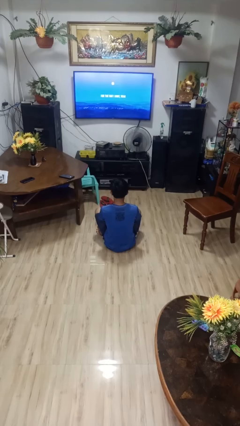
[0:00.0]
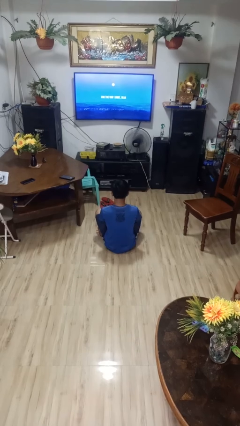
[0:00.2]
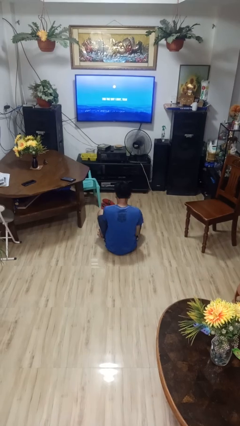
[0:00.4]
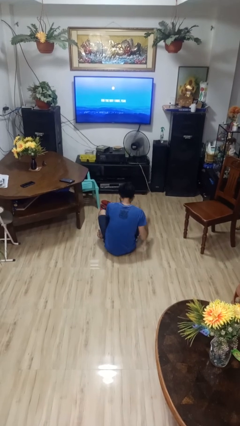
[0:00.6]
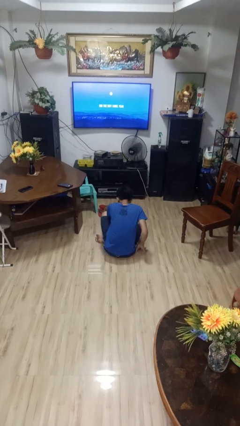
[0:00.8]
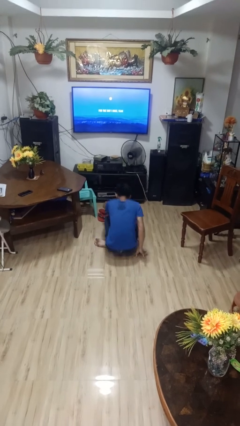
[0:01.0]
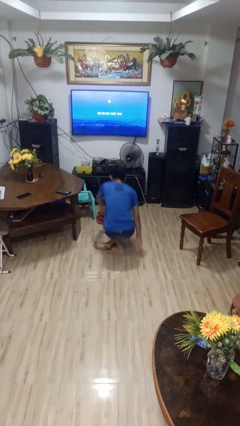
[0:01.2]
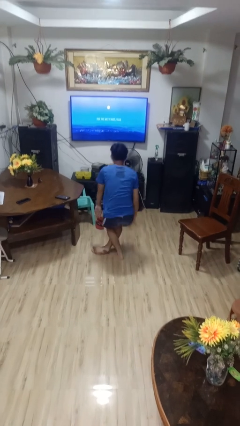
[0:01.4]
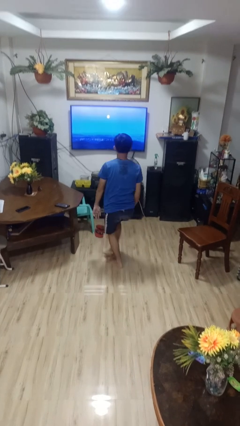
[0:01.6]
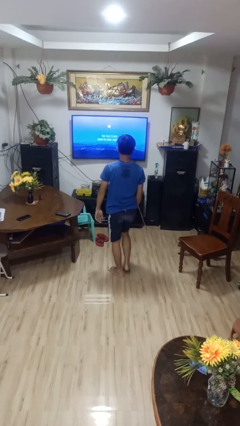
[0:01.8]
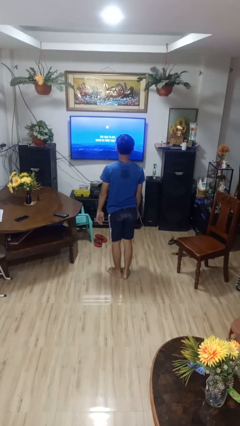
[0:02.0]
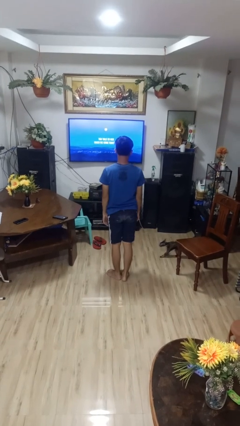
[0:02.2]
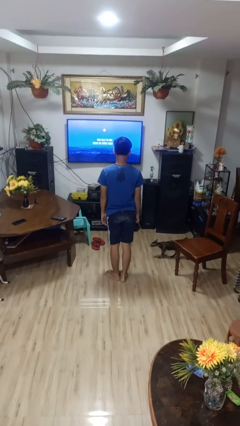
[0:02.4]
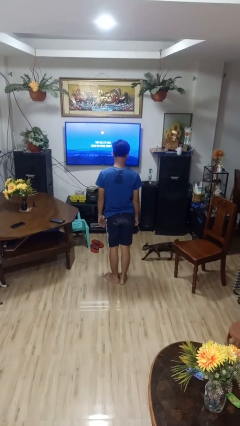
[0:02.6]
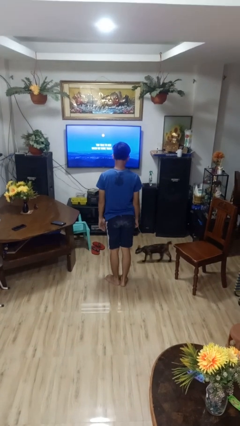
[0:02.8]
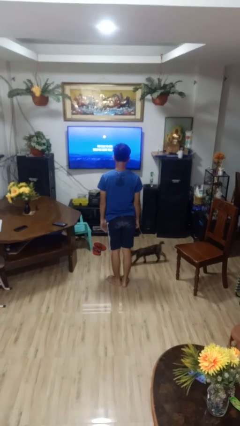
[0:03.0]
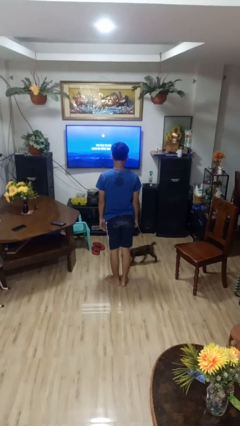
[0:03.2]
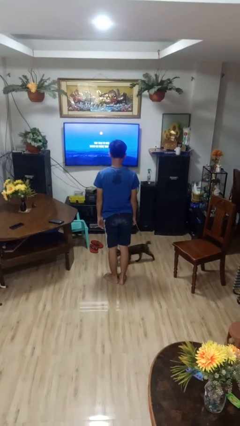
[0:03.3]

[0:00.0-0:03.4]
person stands up from floor

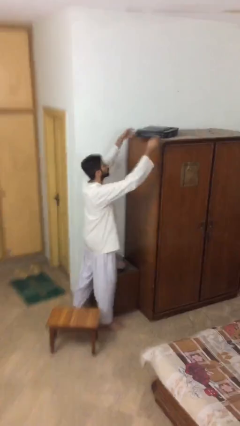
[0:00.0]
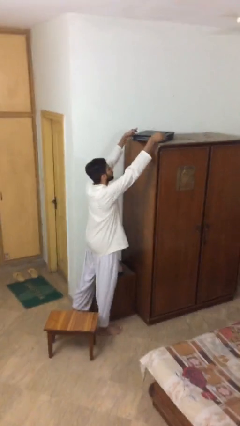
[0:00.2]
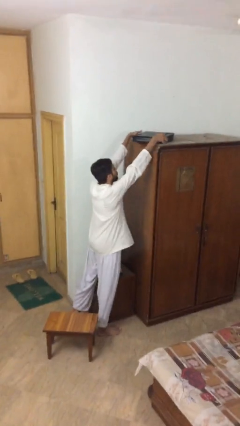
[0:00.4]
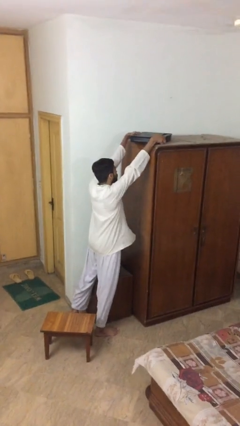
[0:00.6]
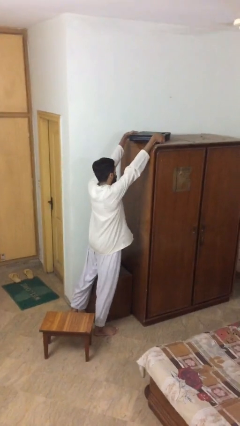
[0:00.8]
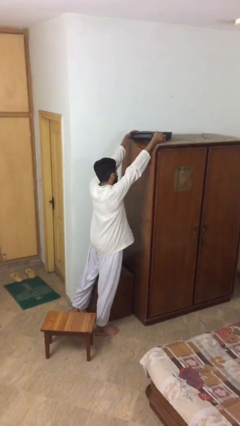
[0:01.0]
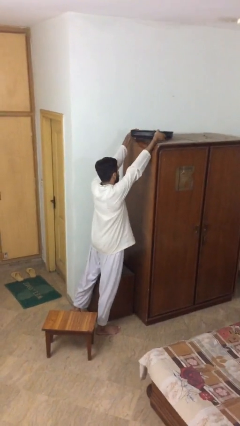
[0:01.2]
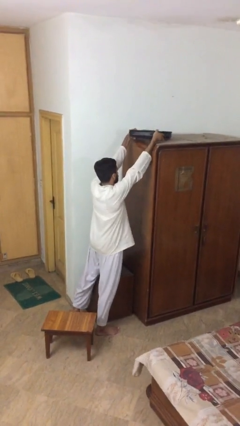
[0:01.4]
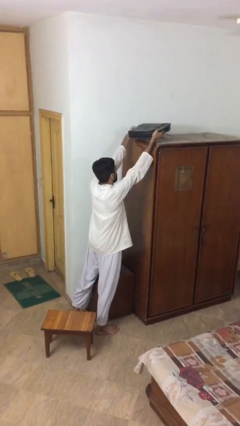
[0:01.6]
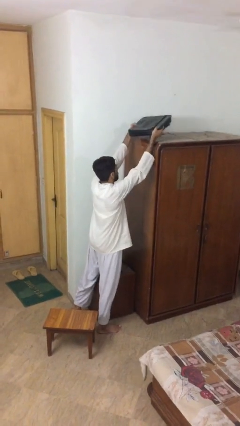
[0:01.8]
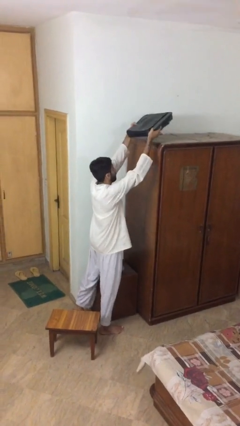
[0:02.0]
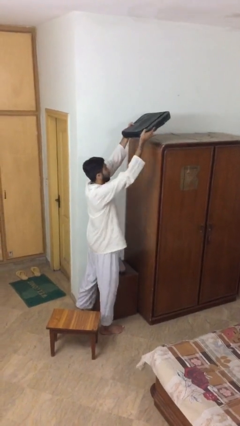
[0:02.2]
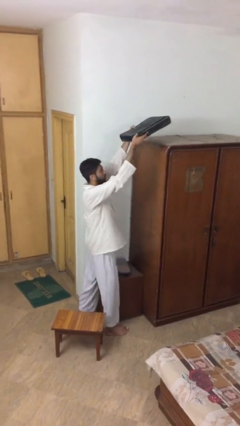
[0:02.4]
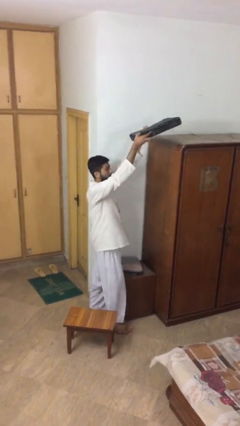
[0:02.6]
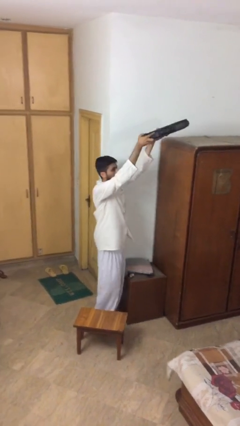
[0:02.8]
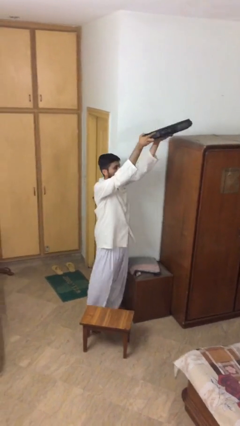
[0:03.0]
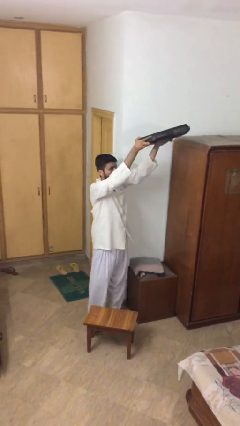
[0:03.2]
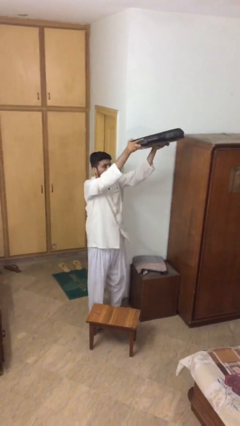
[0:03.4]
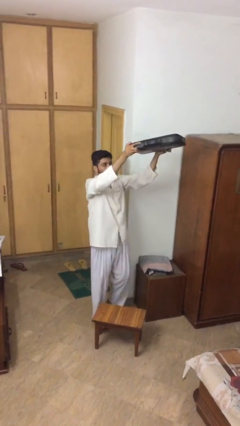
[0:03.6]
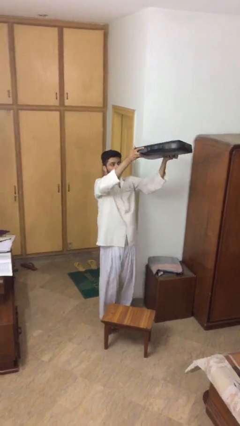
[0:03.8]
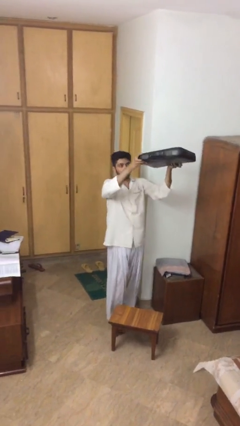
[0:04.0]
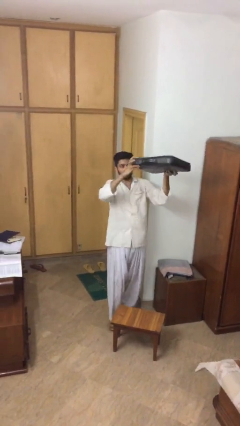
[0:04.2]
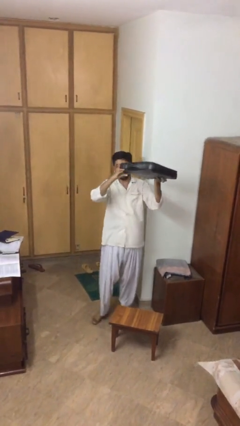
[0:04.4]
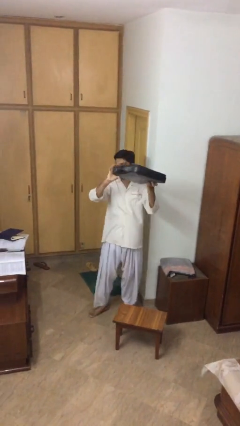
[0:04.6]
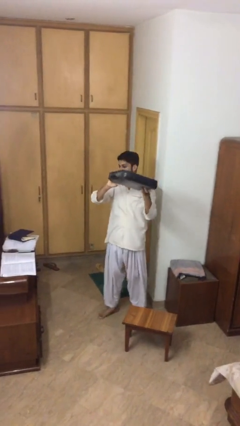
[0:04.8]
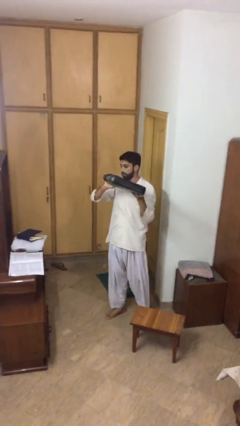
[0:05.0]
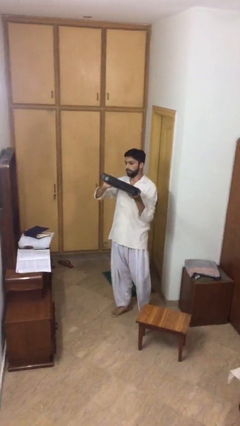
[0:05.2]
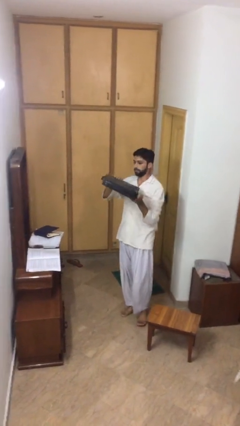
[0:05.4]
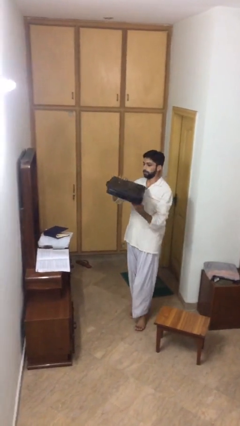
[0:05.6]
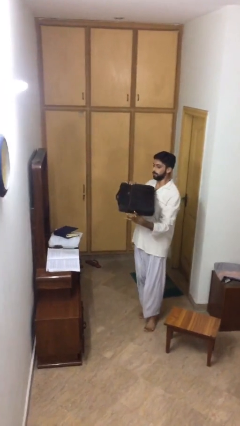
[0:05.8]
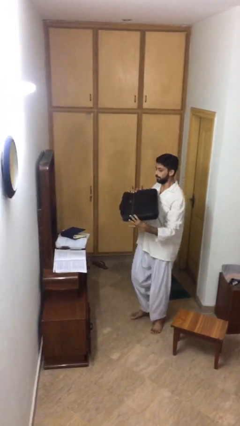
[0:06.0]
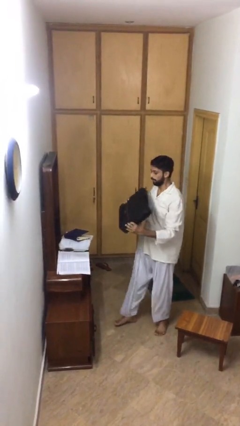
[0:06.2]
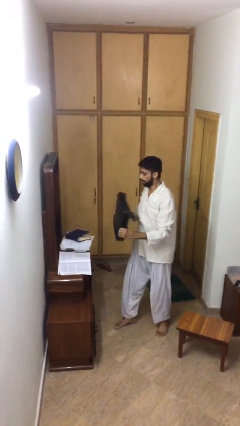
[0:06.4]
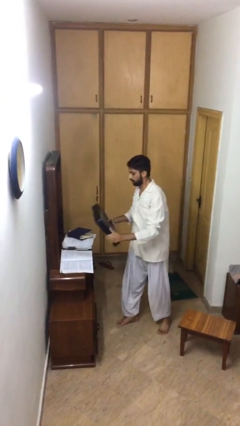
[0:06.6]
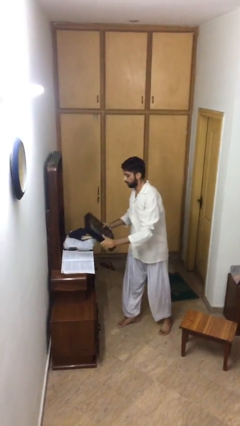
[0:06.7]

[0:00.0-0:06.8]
person picks up object from shelf

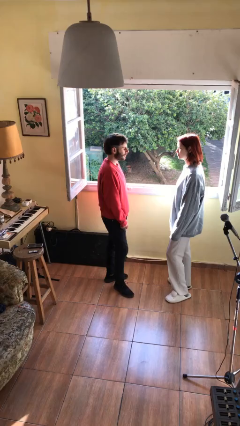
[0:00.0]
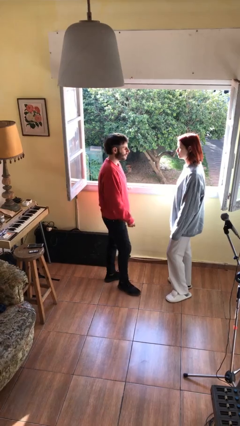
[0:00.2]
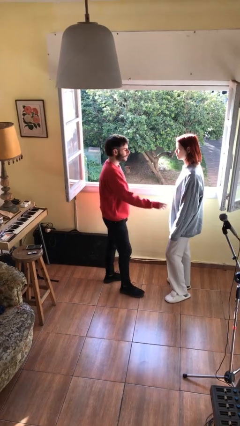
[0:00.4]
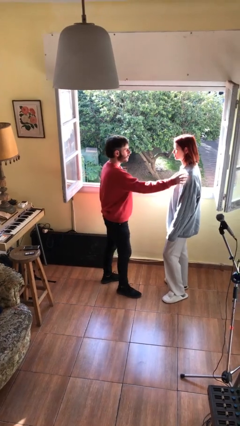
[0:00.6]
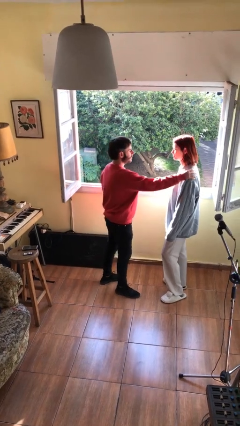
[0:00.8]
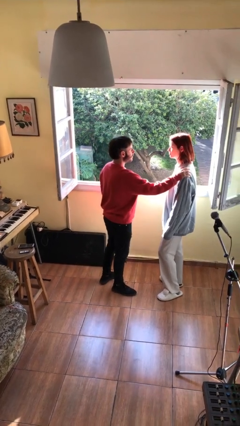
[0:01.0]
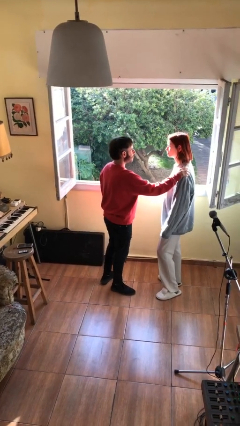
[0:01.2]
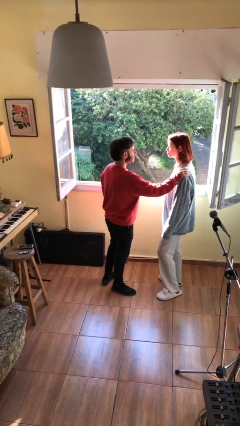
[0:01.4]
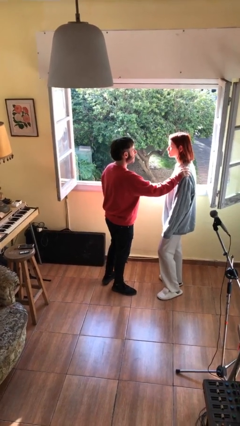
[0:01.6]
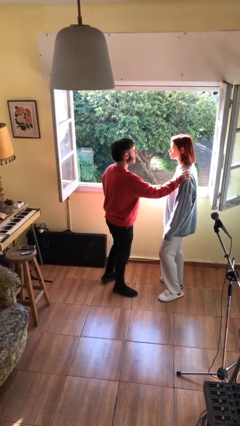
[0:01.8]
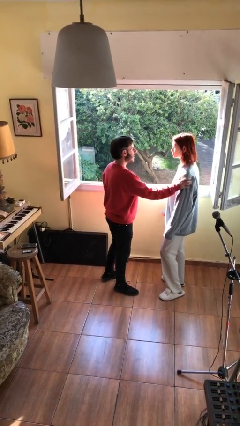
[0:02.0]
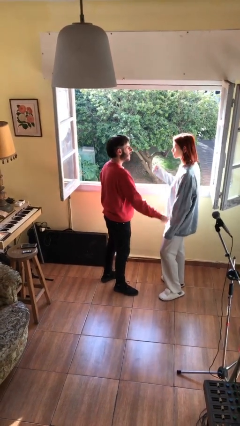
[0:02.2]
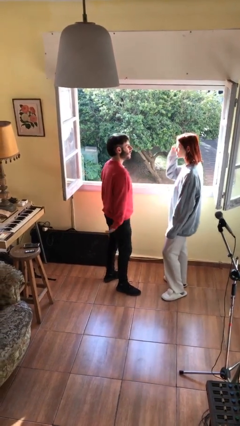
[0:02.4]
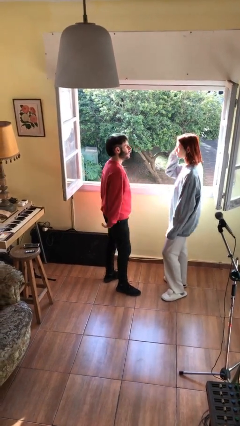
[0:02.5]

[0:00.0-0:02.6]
person pounds shoulders of person

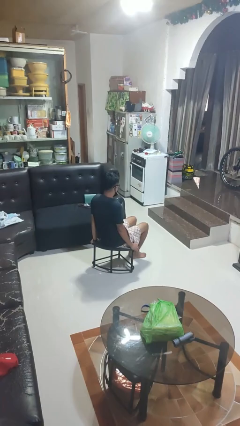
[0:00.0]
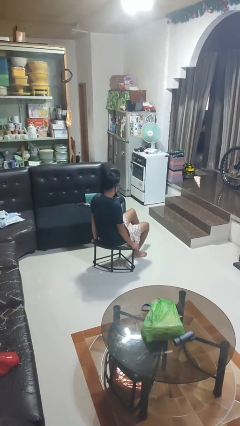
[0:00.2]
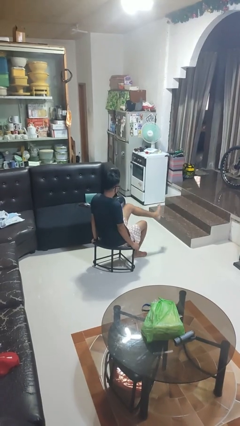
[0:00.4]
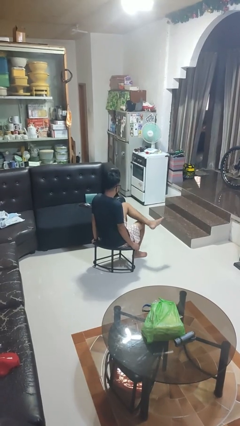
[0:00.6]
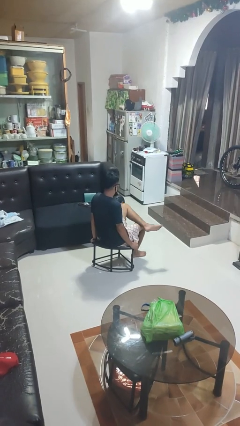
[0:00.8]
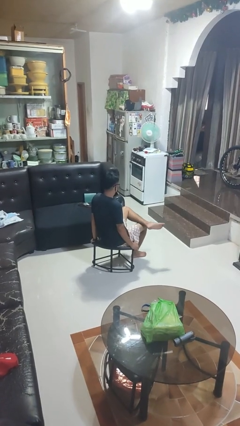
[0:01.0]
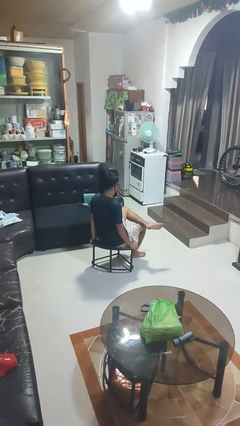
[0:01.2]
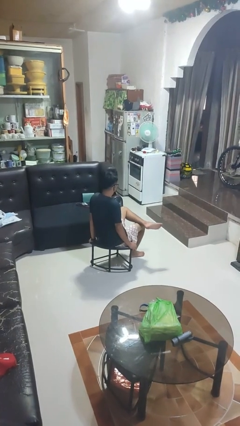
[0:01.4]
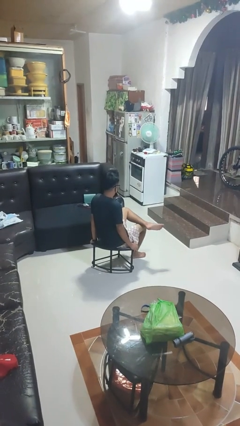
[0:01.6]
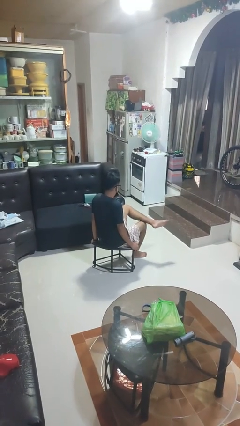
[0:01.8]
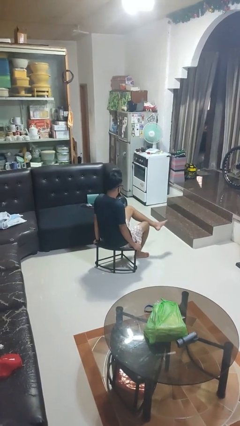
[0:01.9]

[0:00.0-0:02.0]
person crosses legs

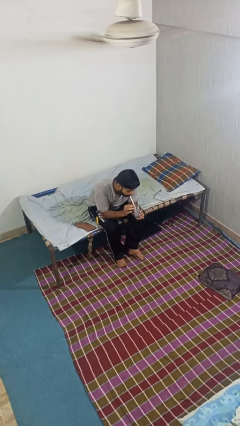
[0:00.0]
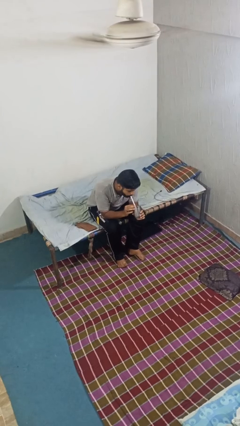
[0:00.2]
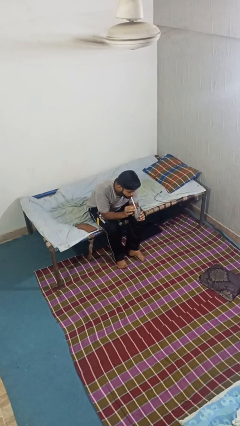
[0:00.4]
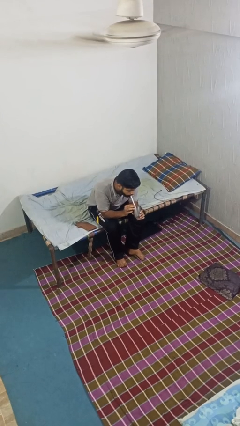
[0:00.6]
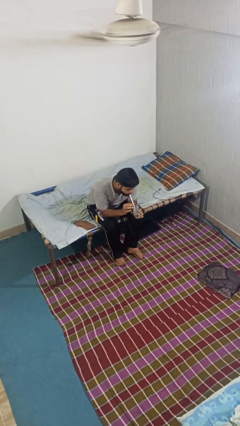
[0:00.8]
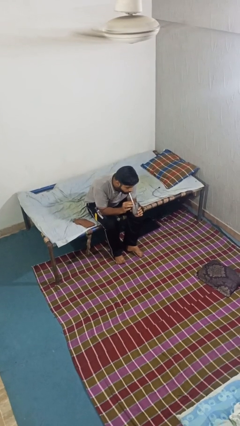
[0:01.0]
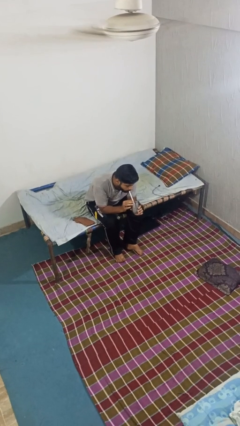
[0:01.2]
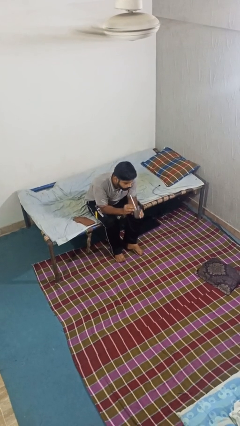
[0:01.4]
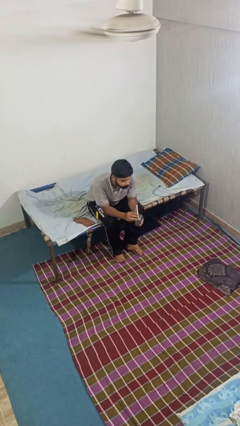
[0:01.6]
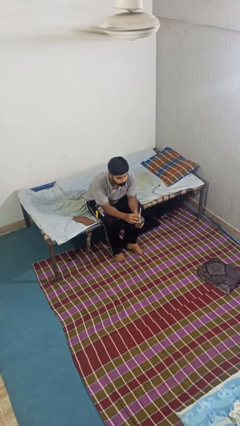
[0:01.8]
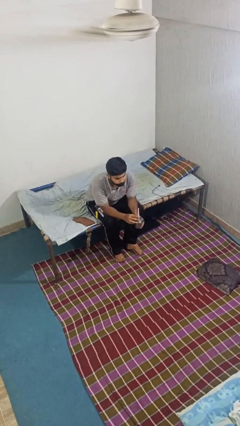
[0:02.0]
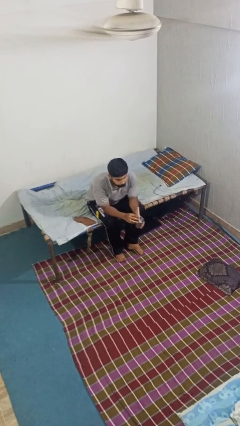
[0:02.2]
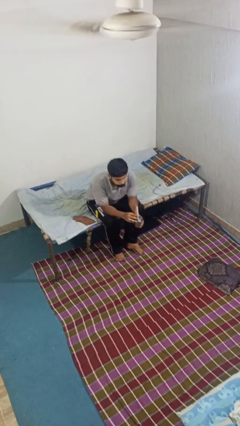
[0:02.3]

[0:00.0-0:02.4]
person drinks from straw

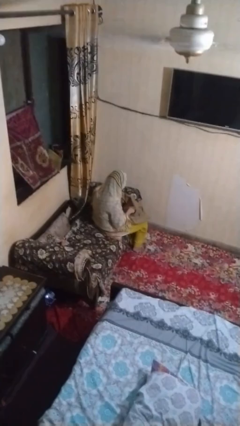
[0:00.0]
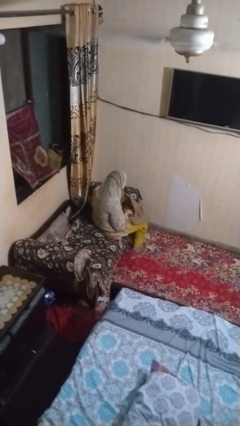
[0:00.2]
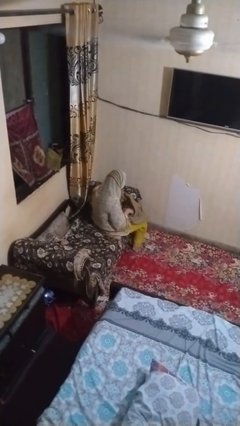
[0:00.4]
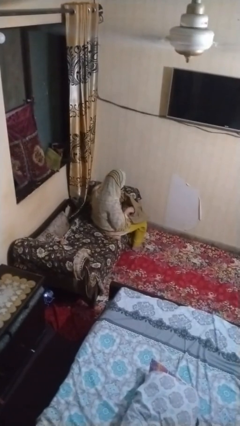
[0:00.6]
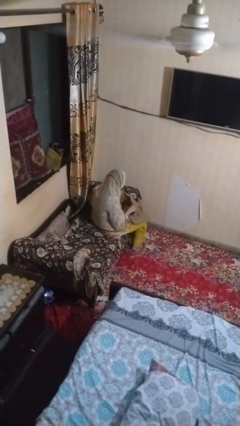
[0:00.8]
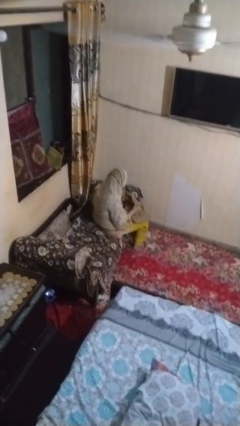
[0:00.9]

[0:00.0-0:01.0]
person puts object into bag
